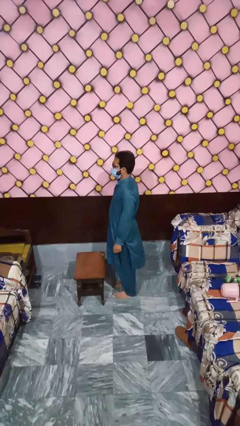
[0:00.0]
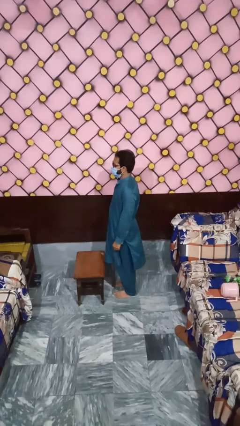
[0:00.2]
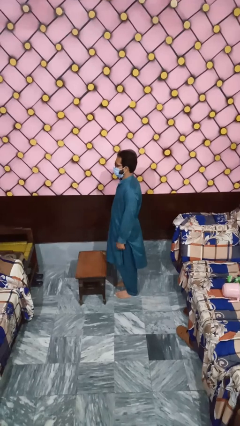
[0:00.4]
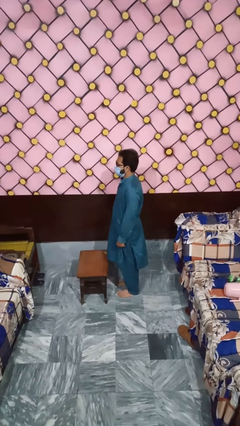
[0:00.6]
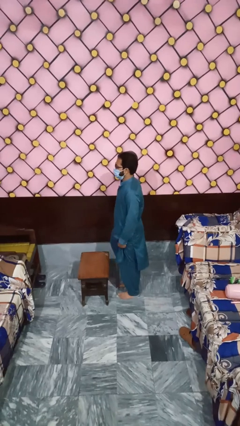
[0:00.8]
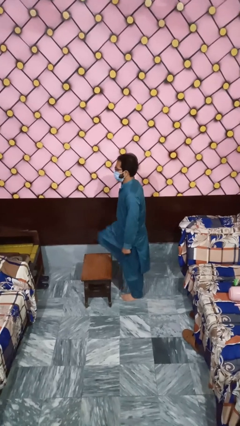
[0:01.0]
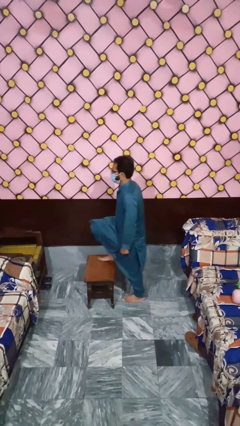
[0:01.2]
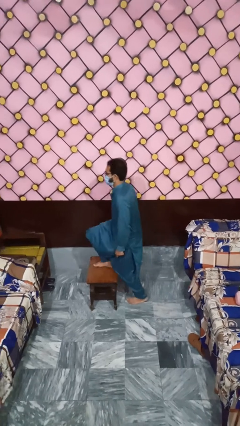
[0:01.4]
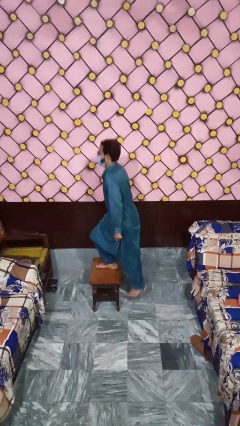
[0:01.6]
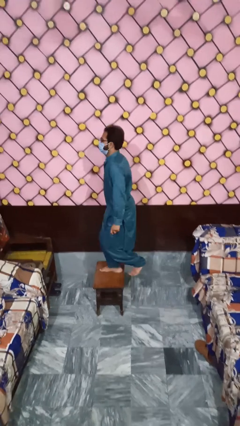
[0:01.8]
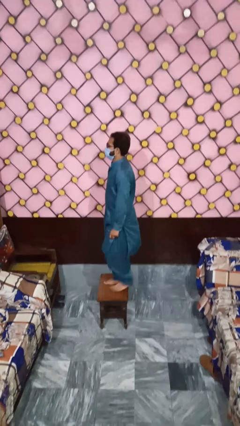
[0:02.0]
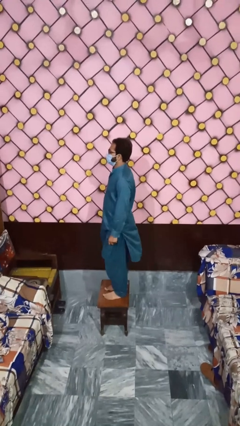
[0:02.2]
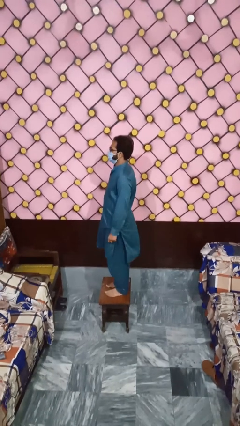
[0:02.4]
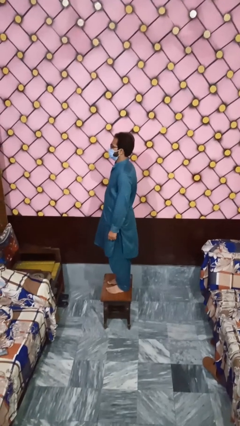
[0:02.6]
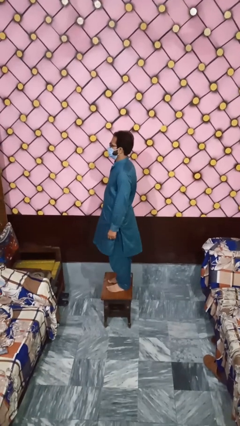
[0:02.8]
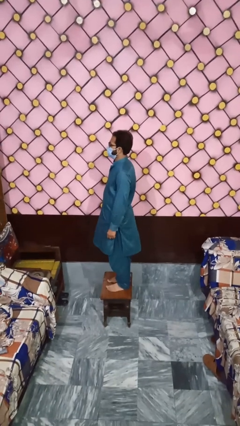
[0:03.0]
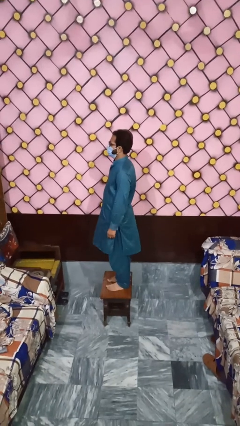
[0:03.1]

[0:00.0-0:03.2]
person climbs on table

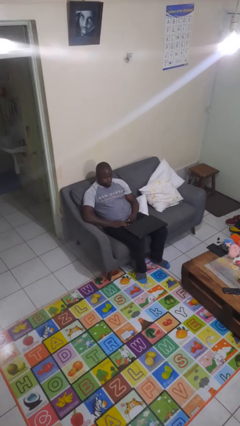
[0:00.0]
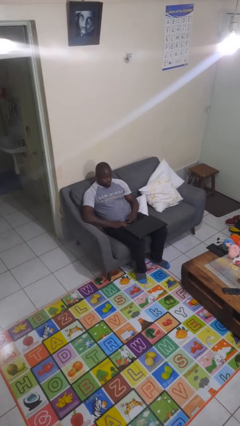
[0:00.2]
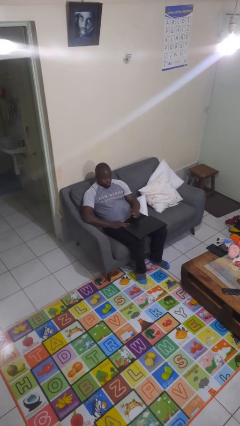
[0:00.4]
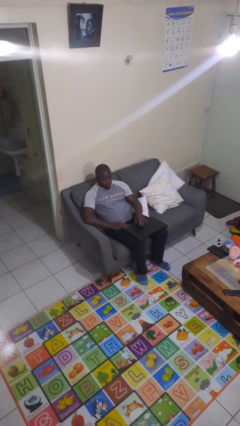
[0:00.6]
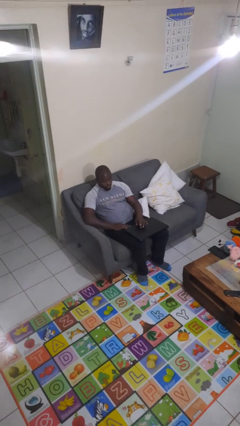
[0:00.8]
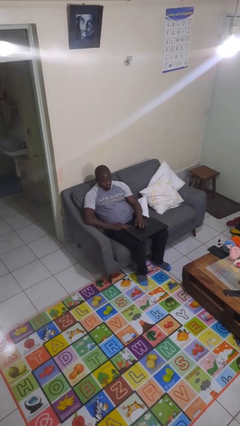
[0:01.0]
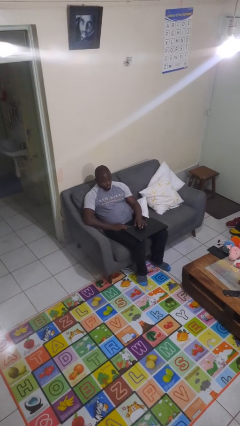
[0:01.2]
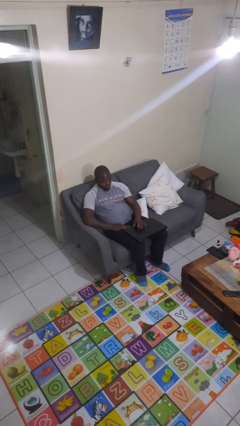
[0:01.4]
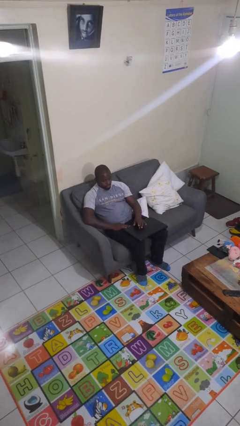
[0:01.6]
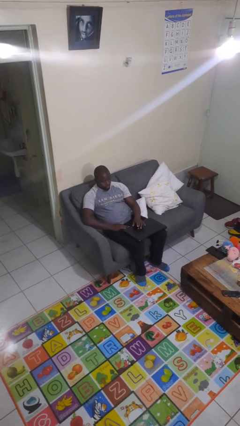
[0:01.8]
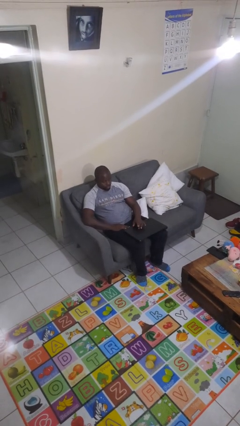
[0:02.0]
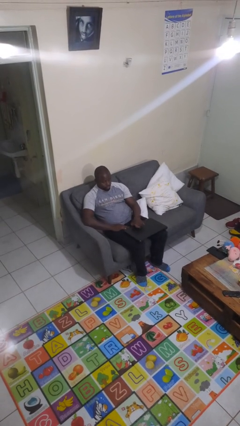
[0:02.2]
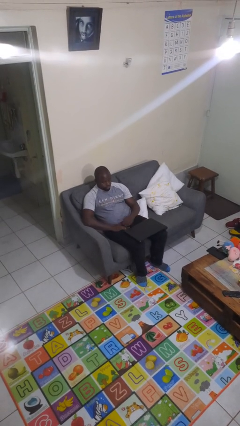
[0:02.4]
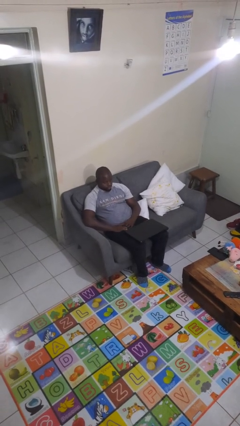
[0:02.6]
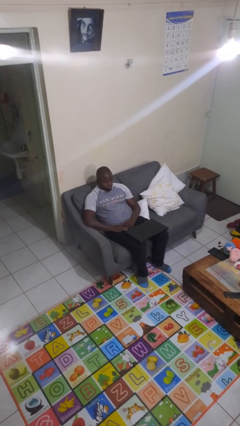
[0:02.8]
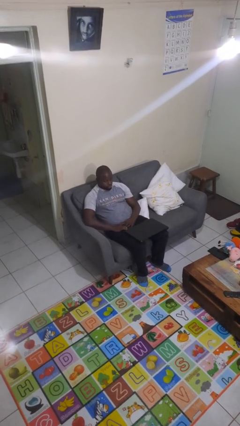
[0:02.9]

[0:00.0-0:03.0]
person taps object with finger

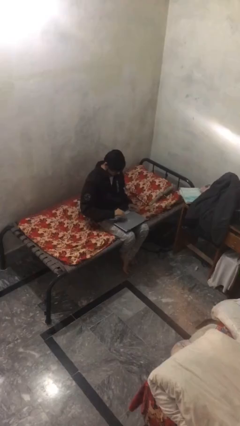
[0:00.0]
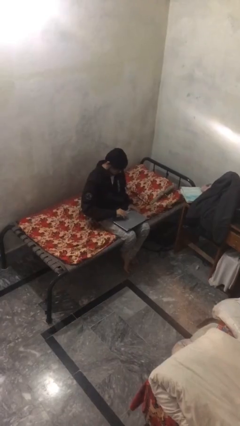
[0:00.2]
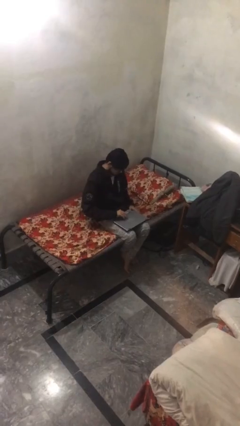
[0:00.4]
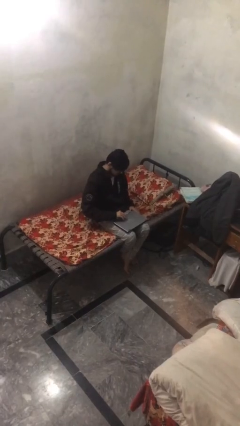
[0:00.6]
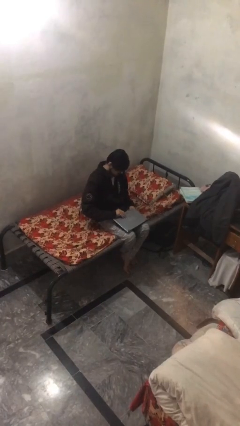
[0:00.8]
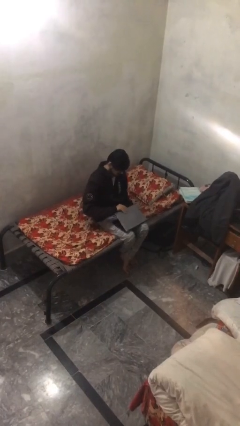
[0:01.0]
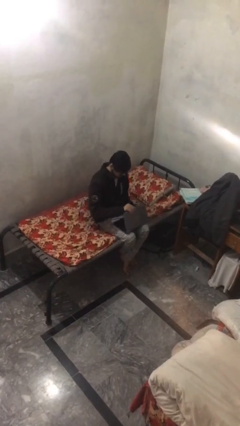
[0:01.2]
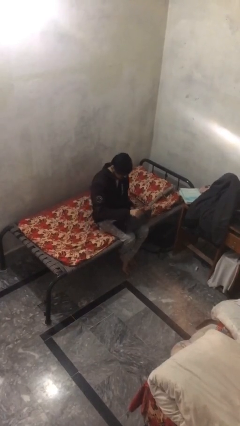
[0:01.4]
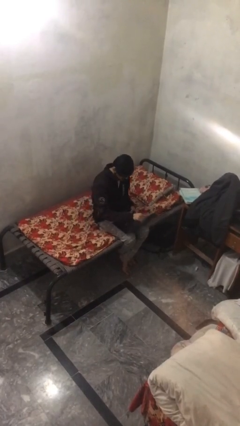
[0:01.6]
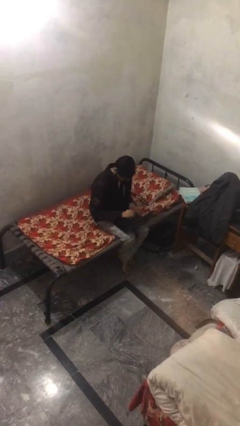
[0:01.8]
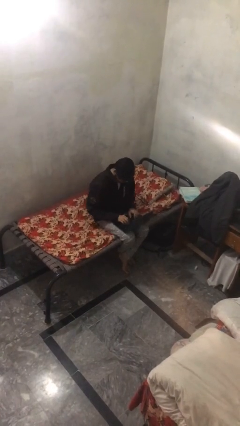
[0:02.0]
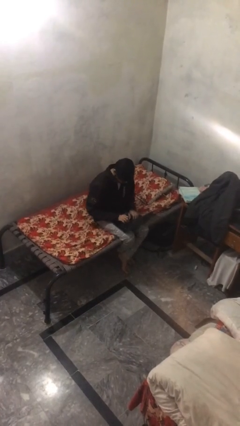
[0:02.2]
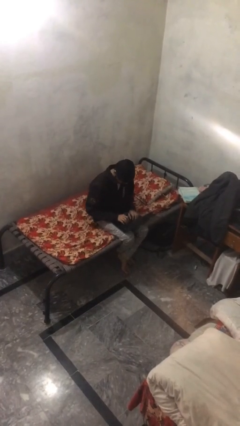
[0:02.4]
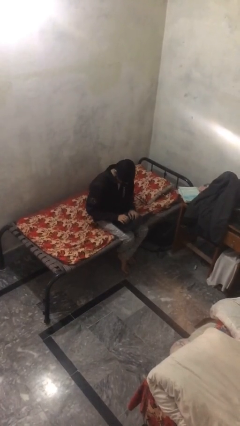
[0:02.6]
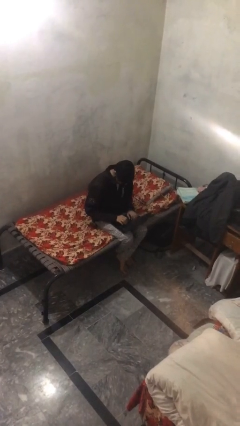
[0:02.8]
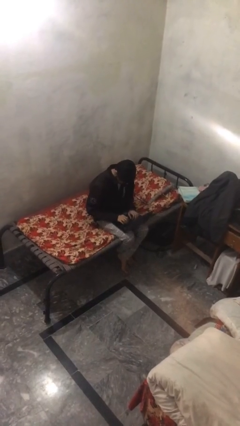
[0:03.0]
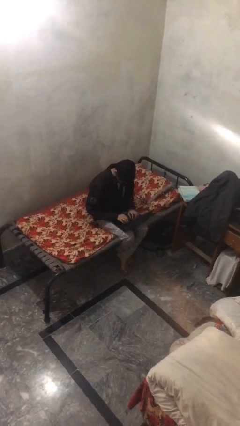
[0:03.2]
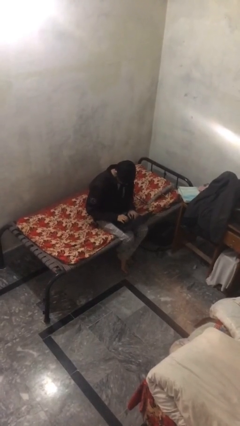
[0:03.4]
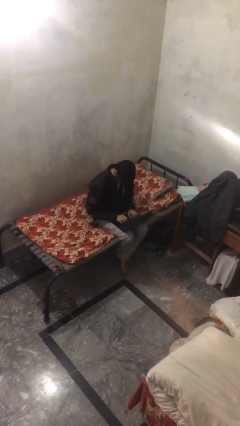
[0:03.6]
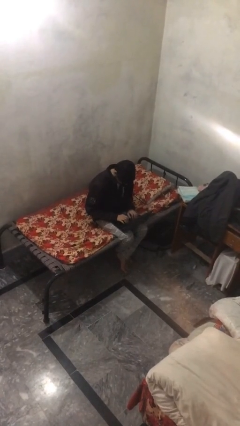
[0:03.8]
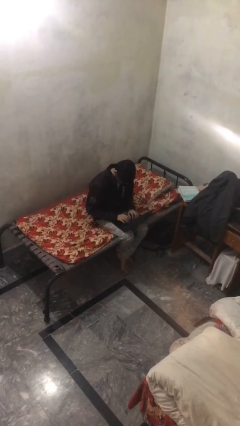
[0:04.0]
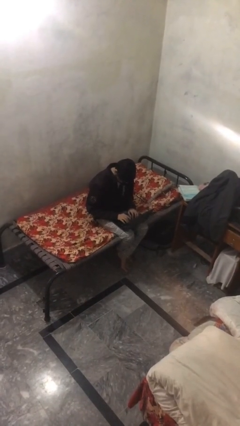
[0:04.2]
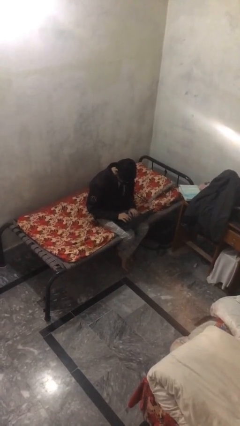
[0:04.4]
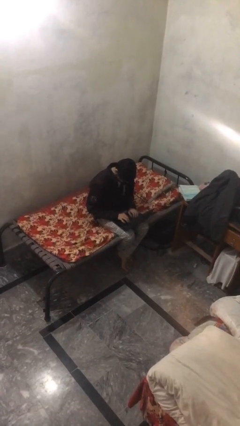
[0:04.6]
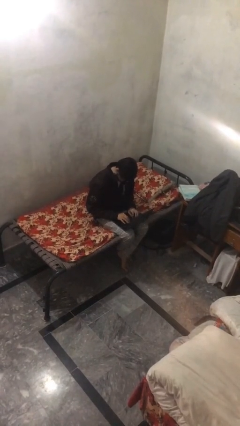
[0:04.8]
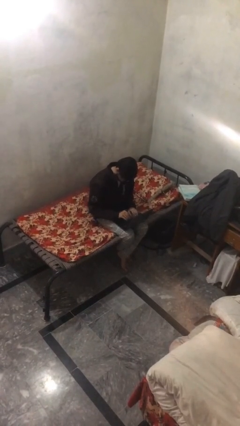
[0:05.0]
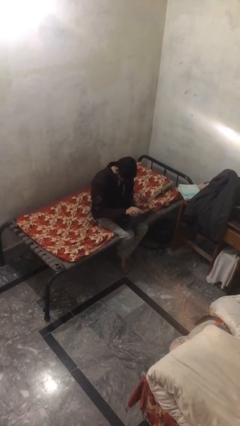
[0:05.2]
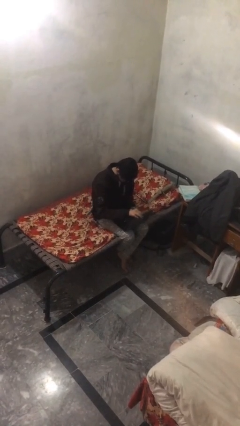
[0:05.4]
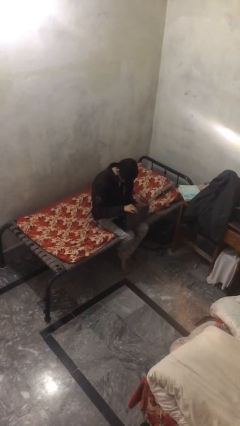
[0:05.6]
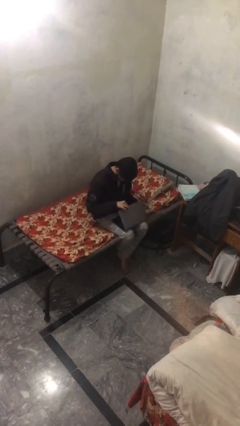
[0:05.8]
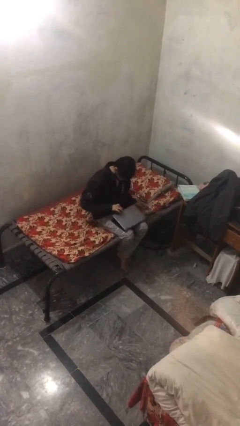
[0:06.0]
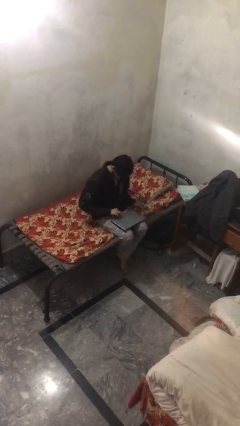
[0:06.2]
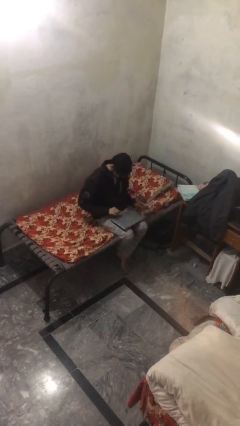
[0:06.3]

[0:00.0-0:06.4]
person interacts with laptop

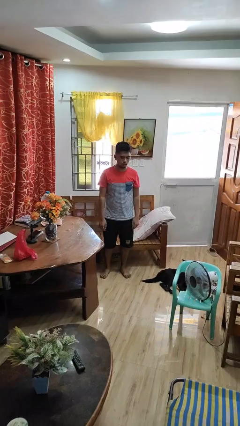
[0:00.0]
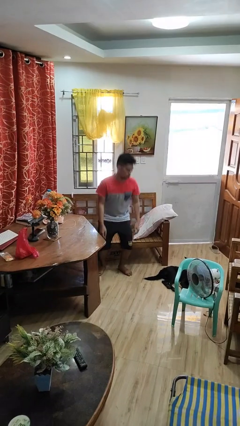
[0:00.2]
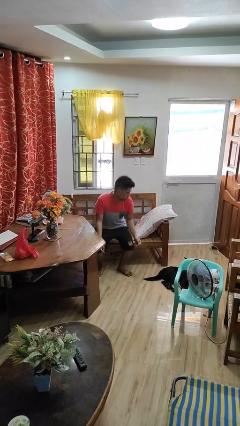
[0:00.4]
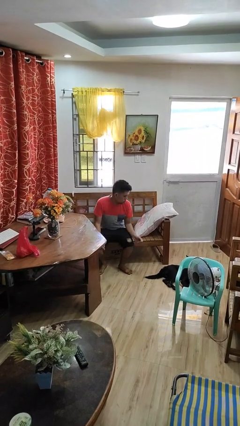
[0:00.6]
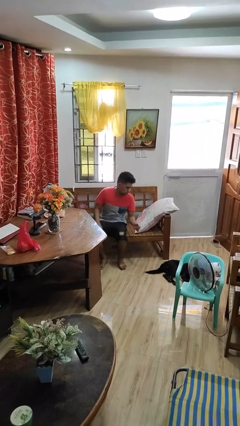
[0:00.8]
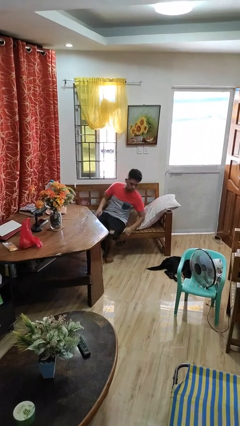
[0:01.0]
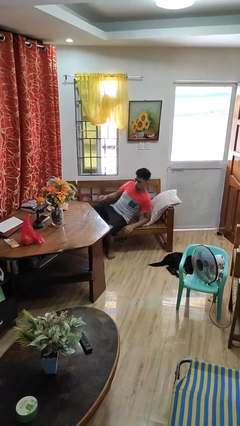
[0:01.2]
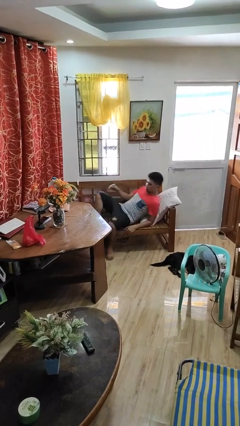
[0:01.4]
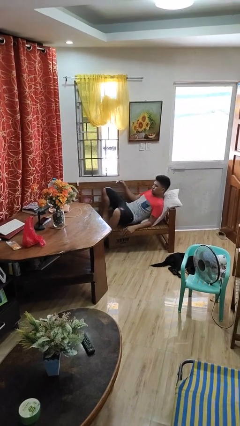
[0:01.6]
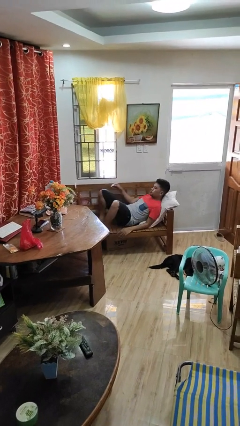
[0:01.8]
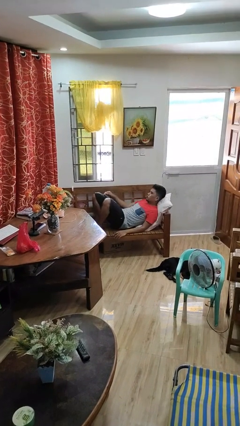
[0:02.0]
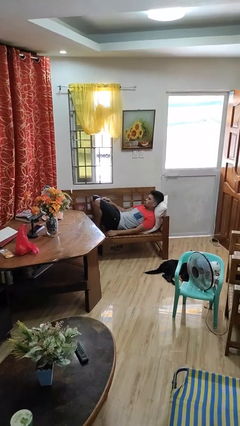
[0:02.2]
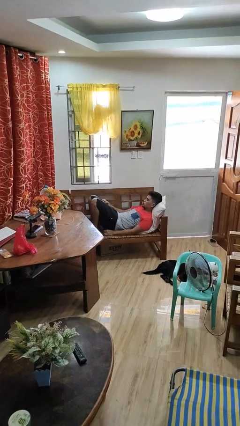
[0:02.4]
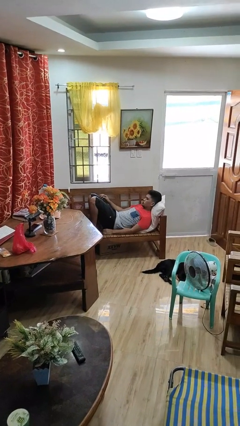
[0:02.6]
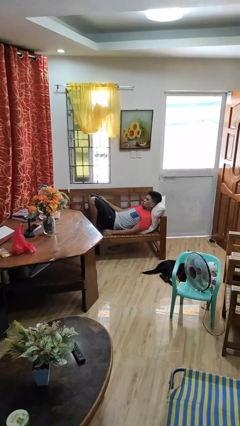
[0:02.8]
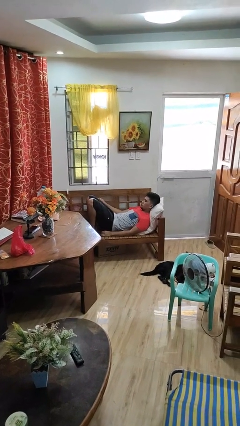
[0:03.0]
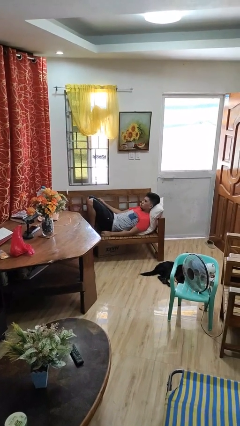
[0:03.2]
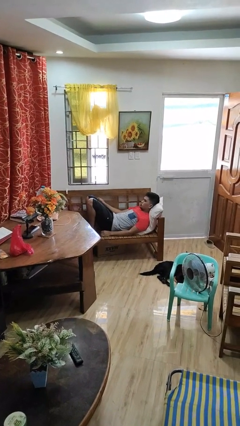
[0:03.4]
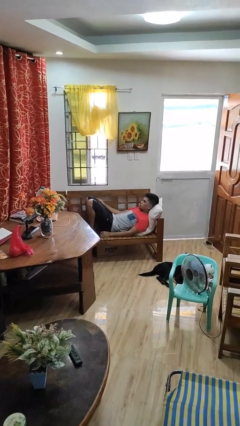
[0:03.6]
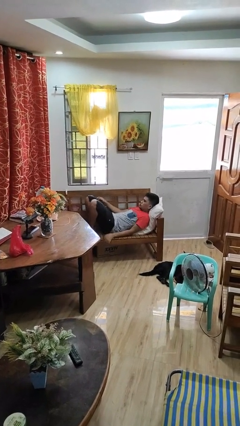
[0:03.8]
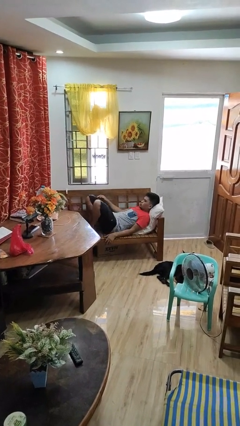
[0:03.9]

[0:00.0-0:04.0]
person lies down on couch

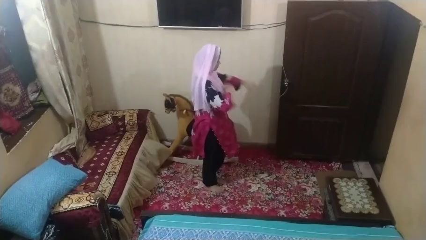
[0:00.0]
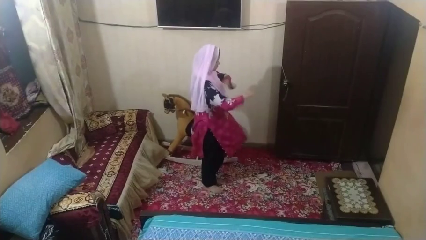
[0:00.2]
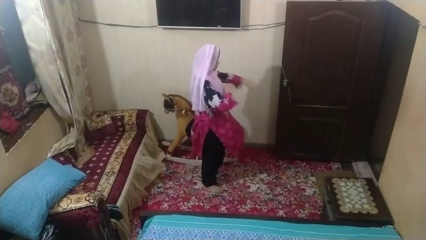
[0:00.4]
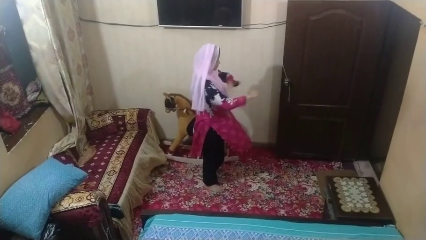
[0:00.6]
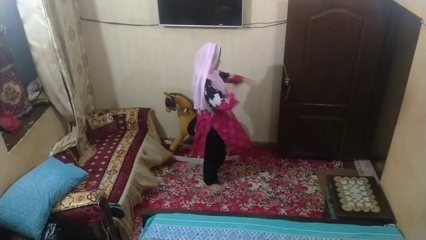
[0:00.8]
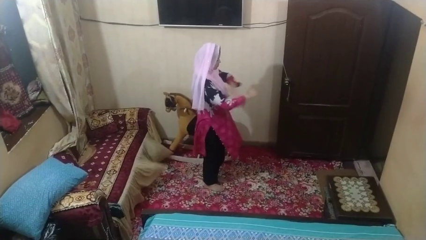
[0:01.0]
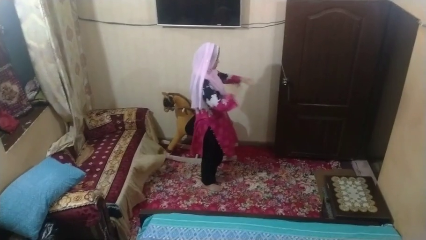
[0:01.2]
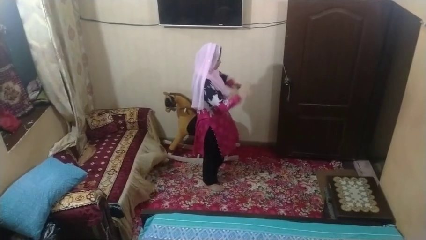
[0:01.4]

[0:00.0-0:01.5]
person karate chop
